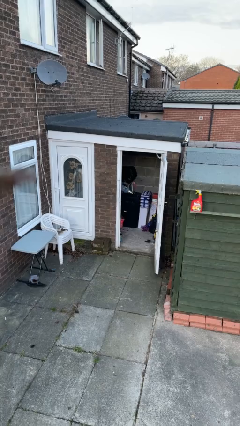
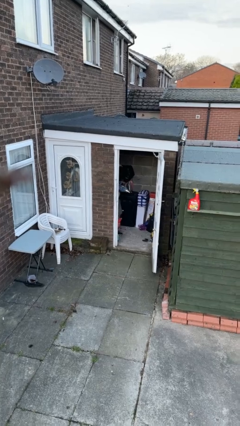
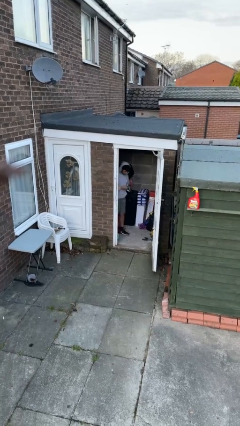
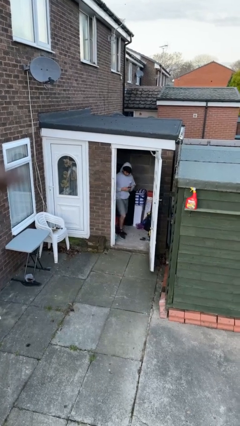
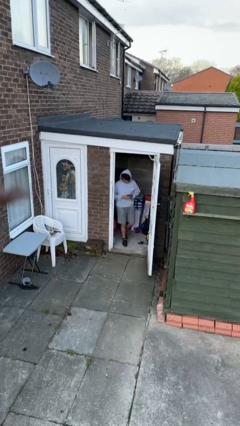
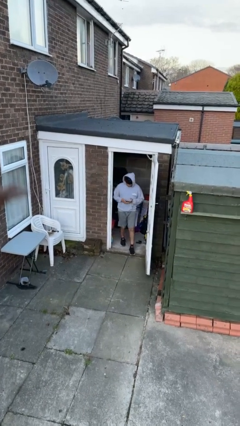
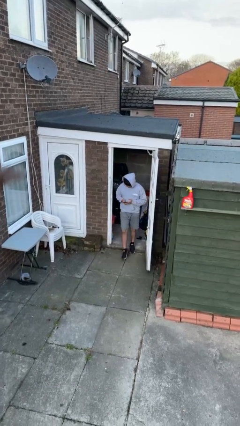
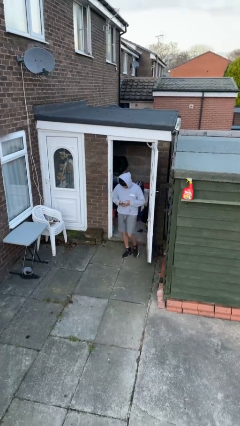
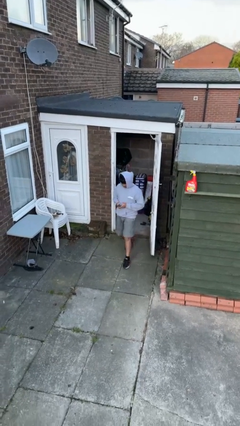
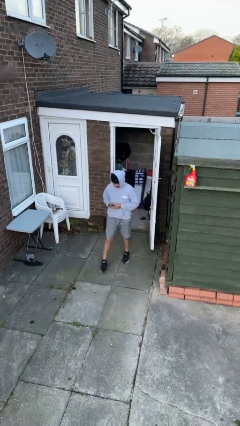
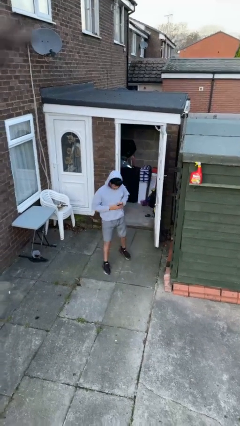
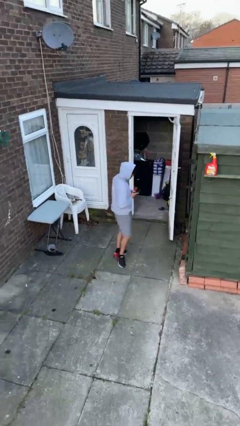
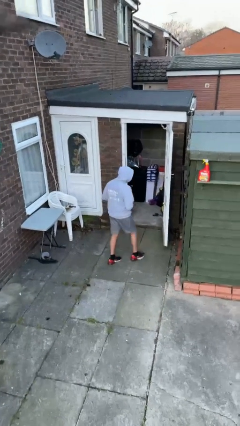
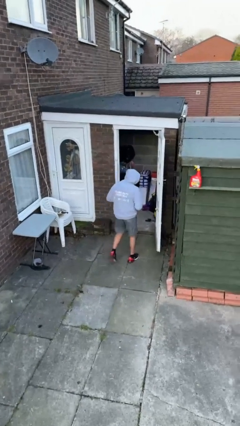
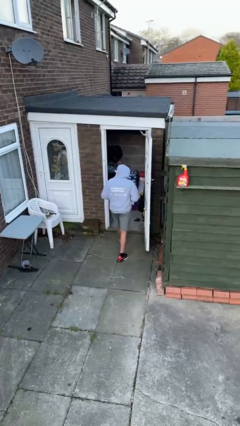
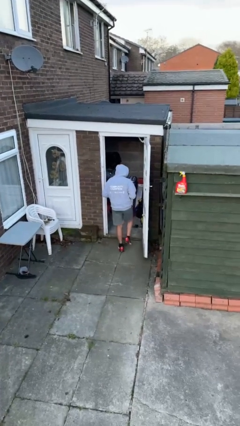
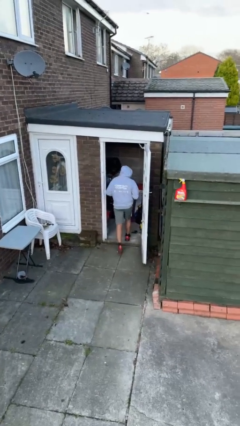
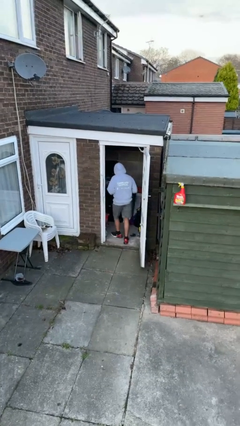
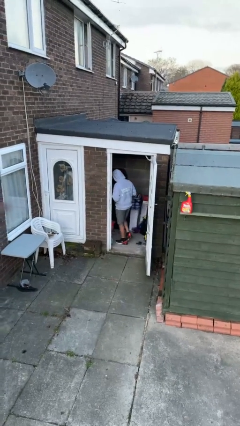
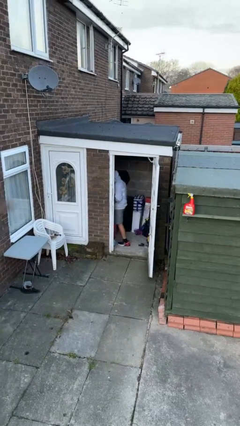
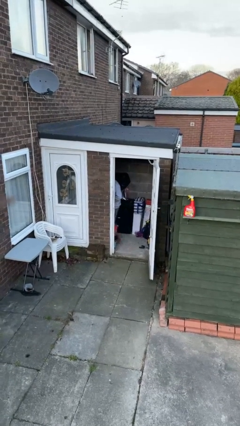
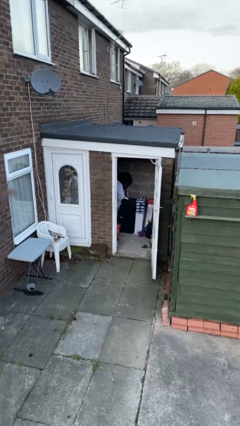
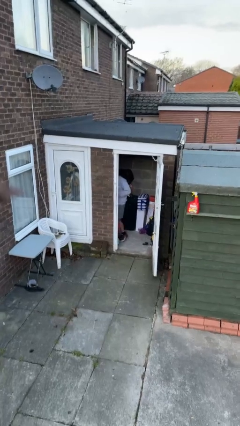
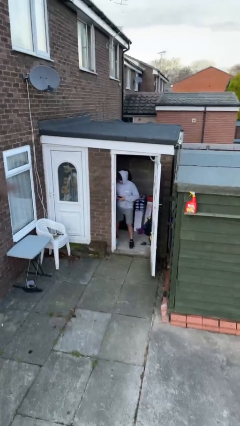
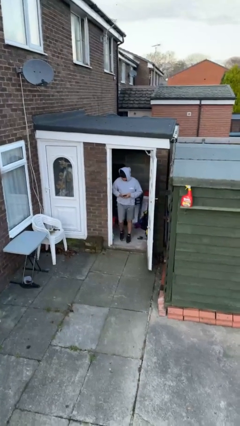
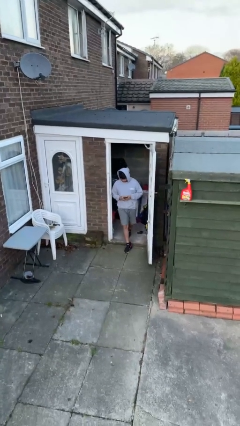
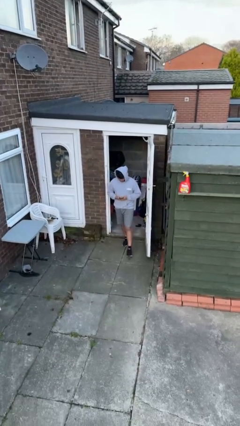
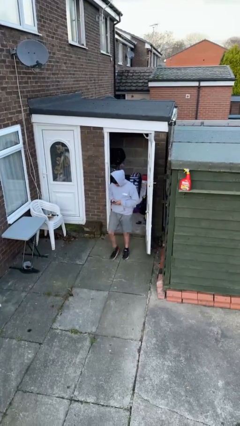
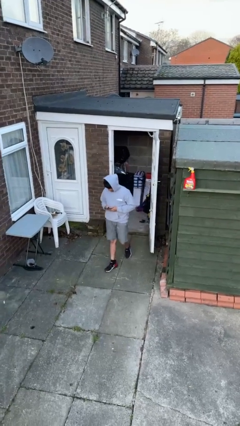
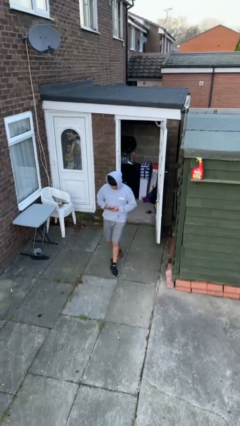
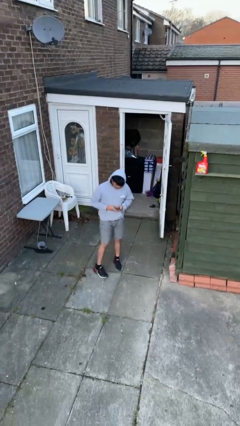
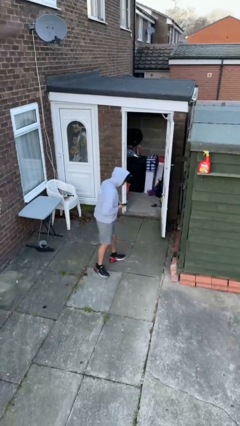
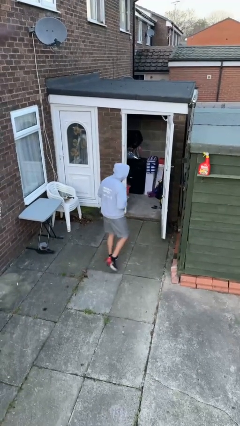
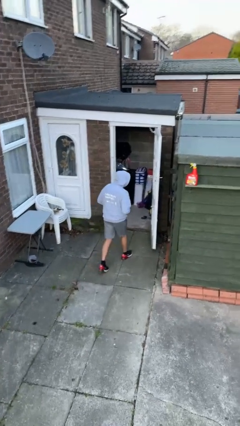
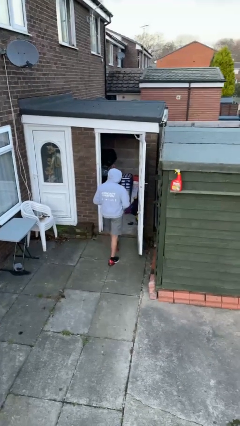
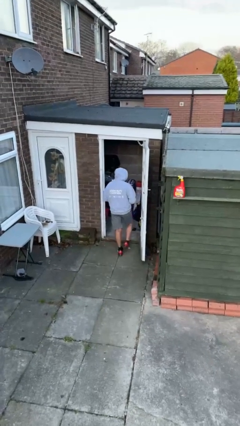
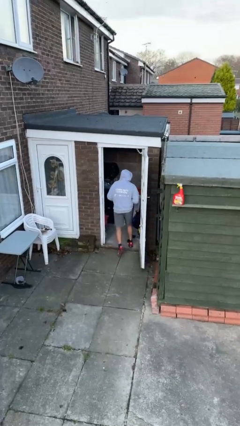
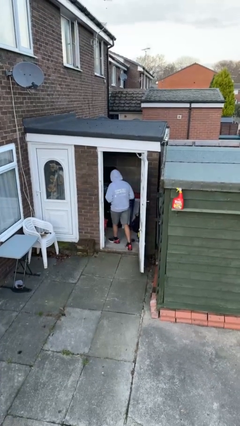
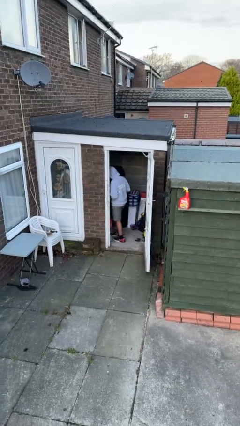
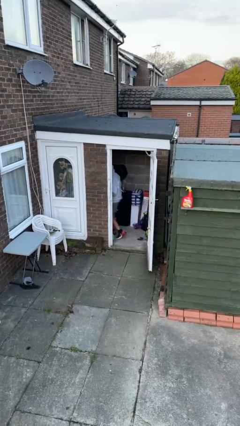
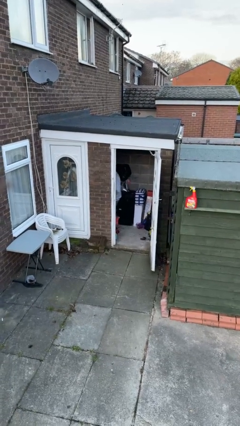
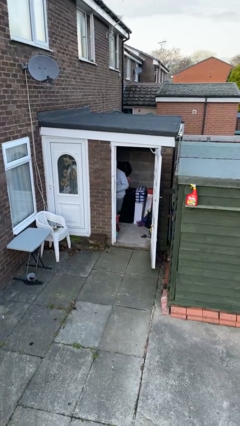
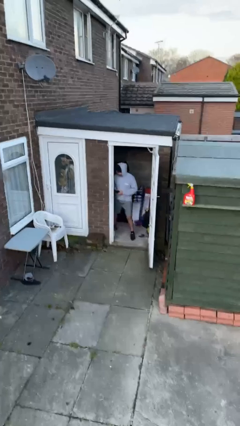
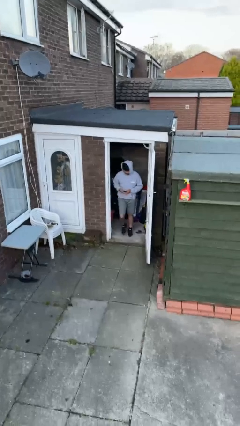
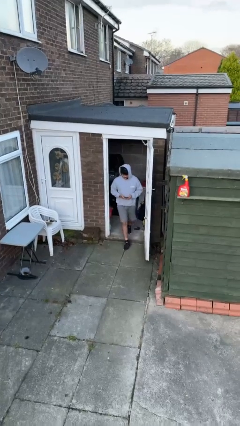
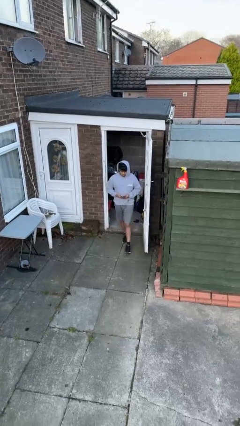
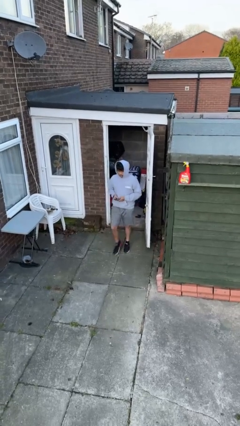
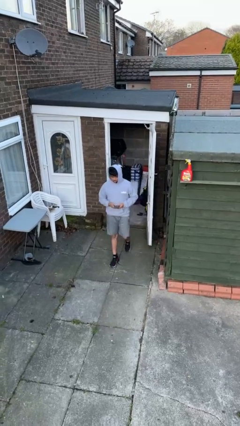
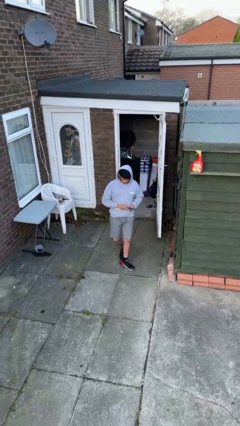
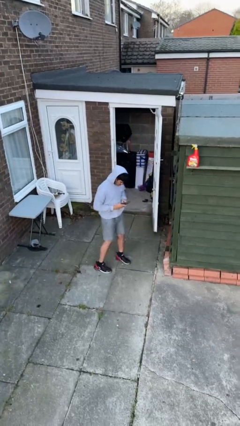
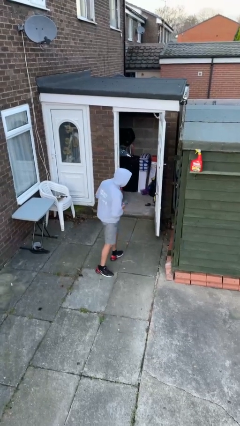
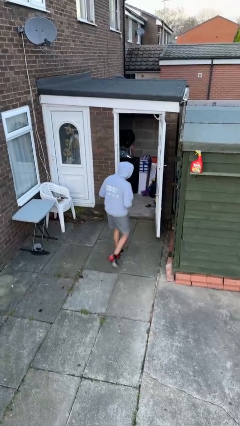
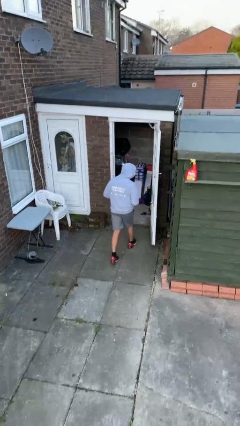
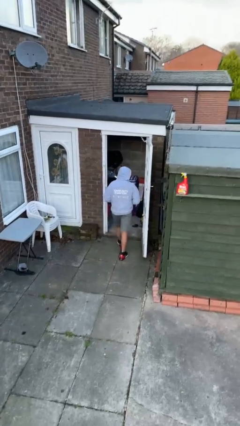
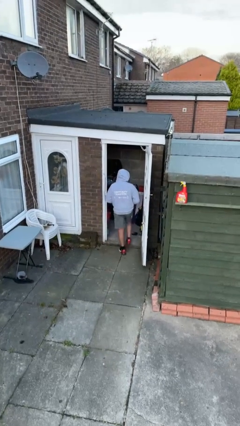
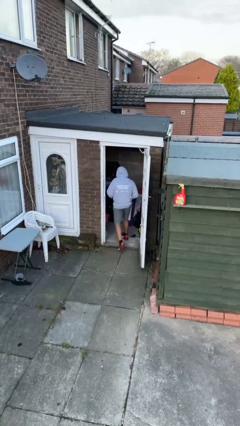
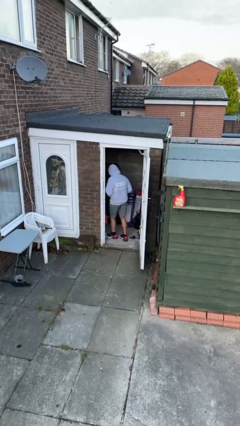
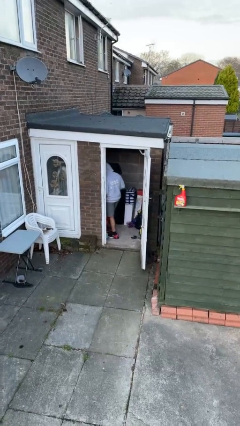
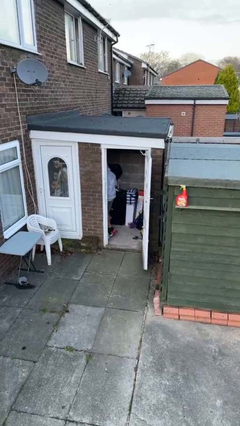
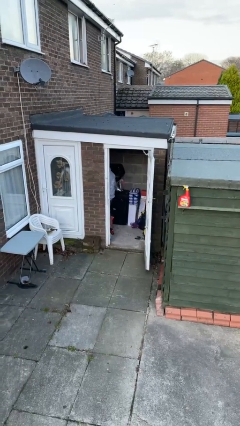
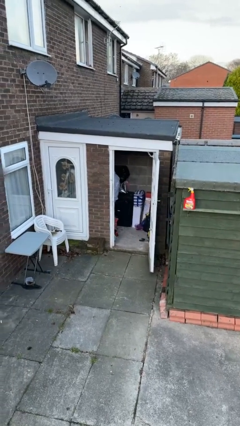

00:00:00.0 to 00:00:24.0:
person texts on phone

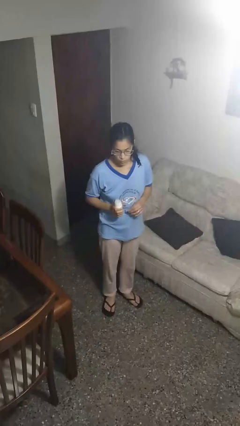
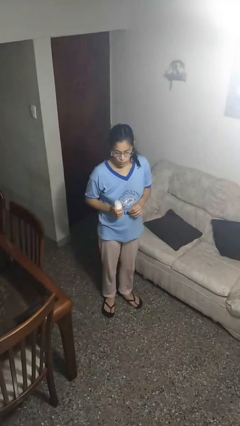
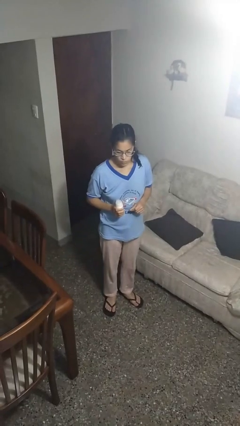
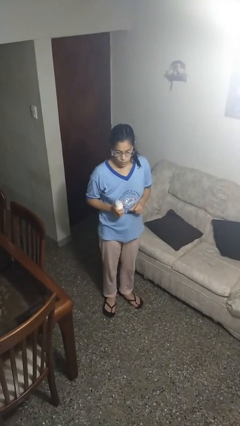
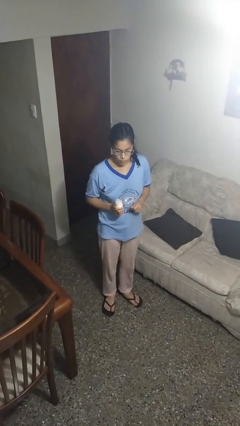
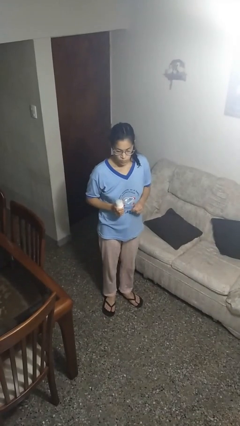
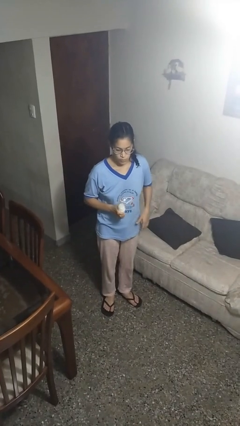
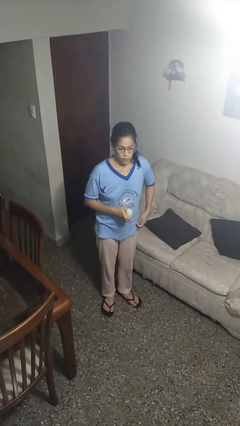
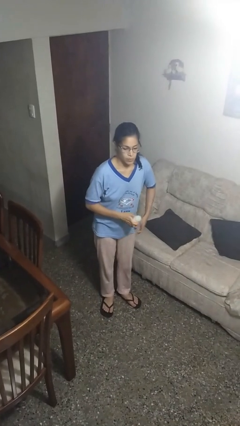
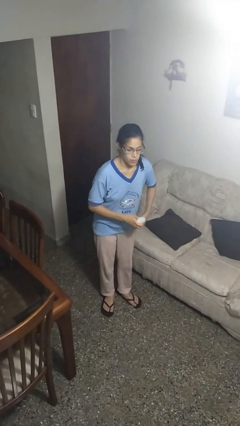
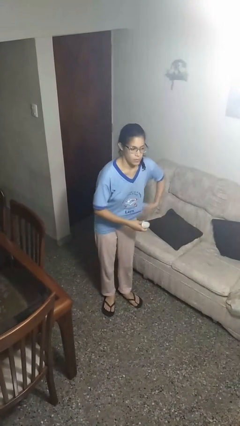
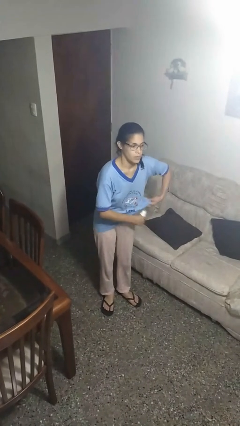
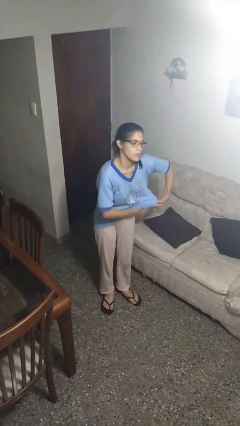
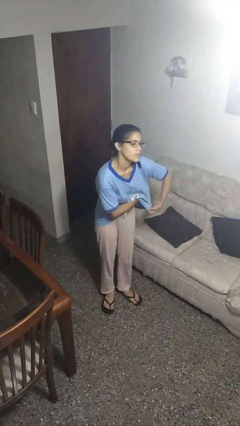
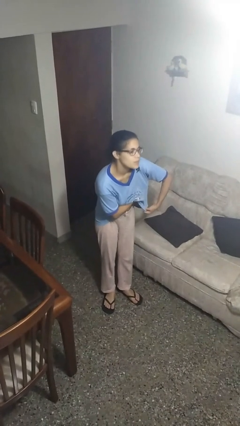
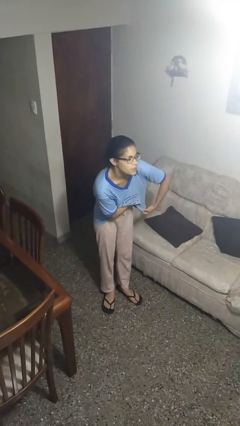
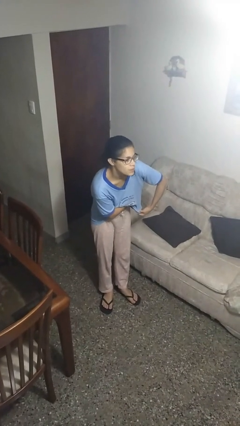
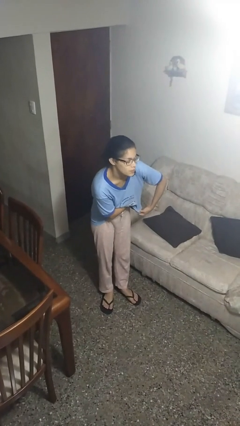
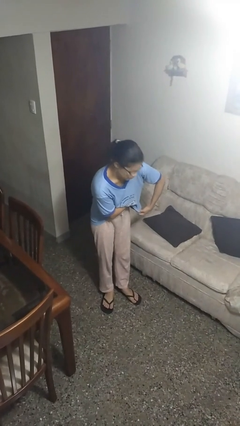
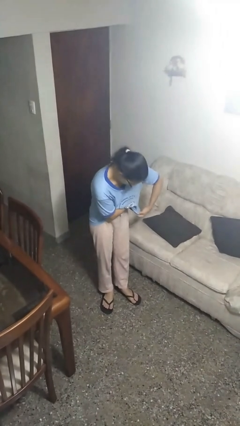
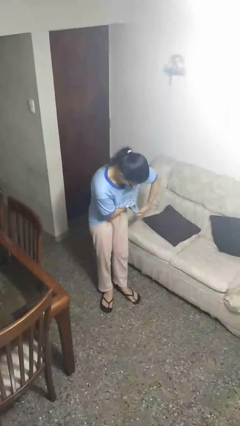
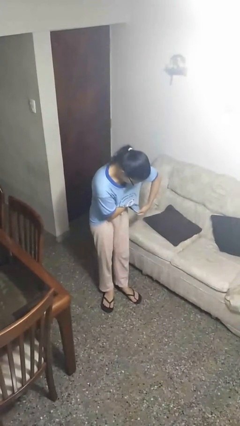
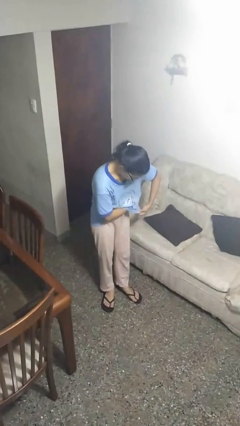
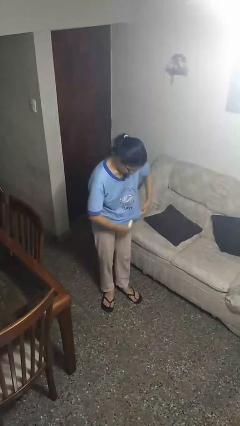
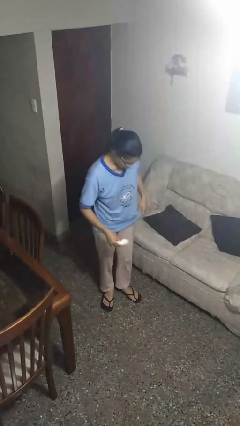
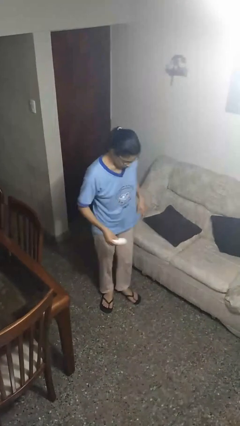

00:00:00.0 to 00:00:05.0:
person applies deodorant

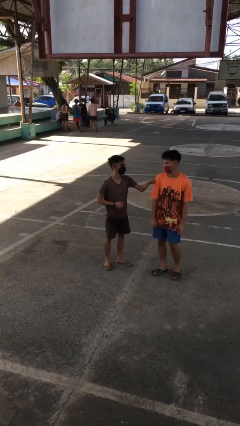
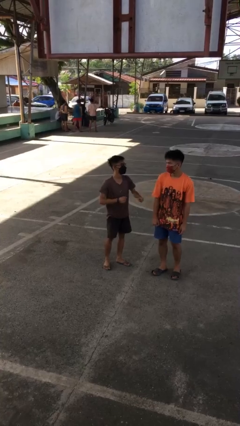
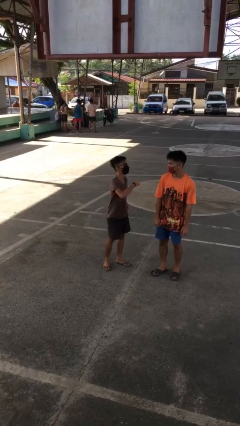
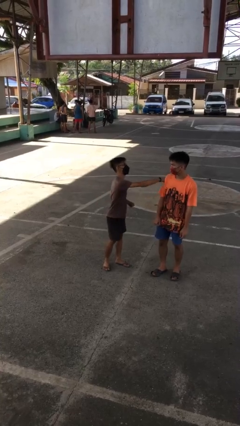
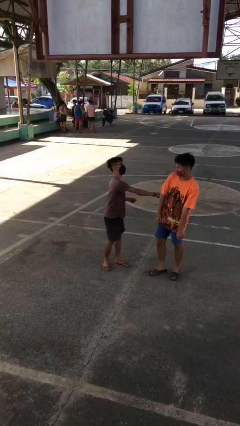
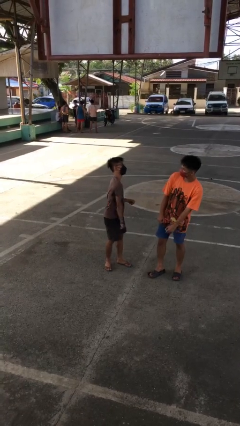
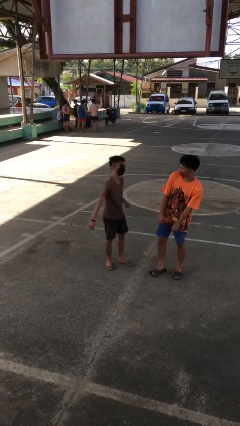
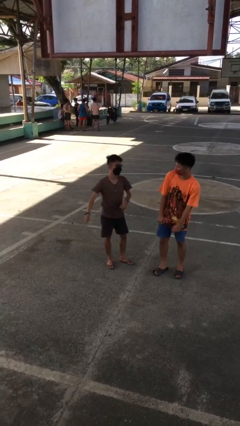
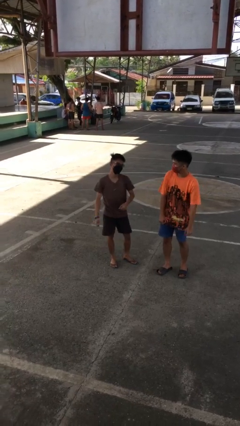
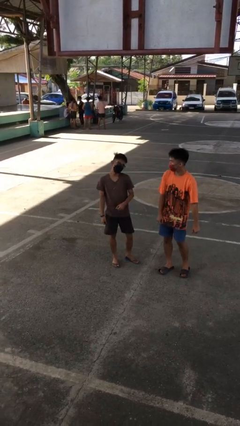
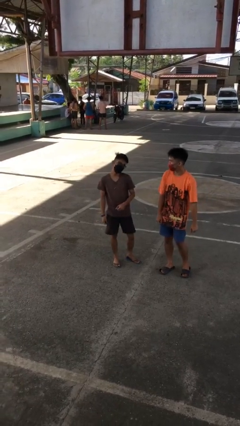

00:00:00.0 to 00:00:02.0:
person pounds shoulders of person
